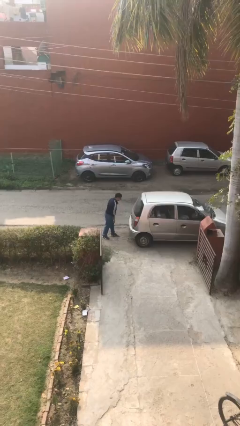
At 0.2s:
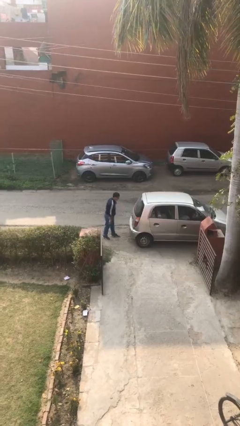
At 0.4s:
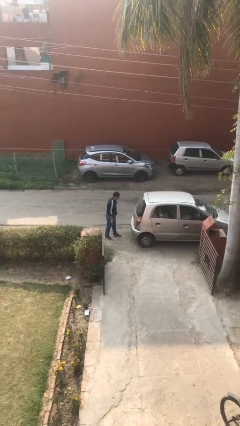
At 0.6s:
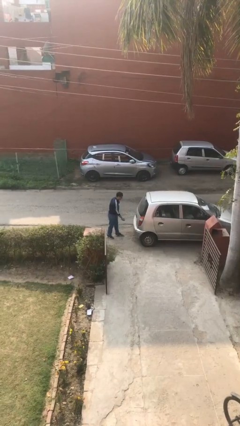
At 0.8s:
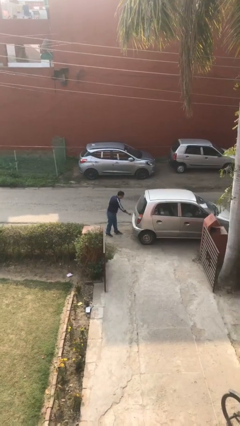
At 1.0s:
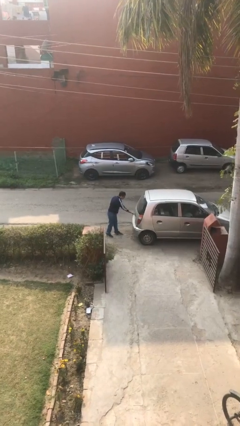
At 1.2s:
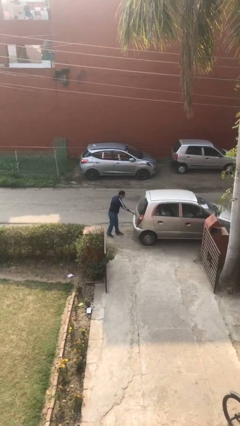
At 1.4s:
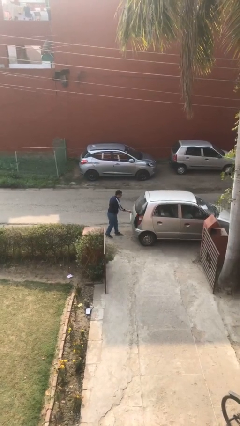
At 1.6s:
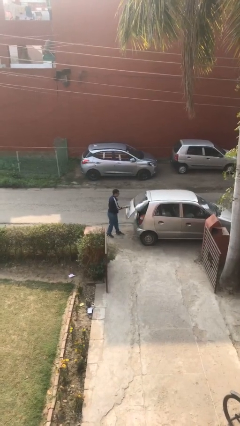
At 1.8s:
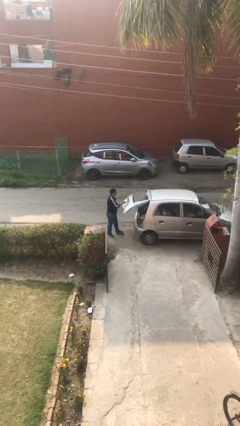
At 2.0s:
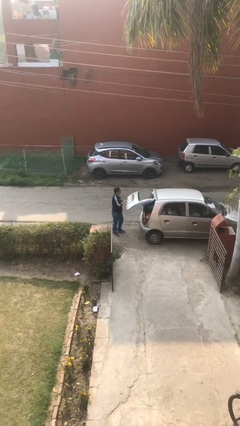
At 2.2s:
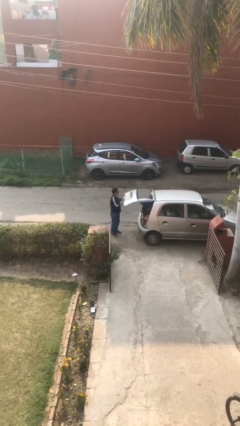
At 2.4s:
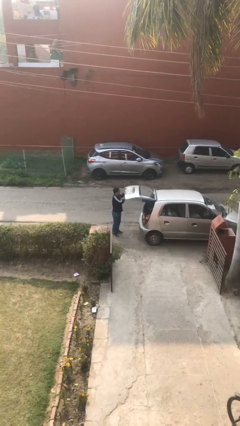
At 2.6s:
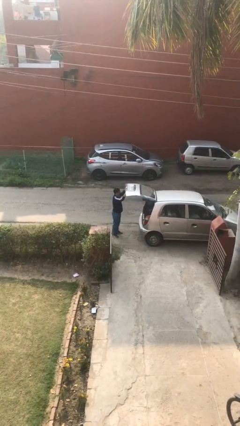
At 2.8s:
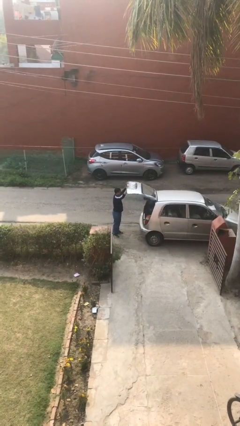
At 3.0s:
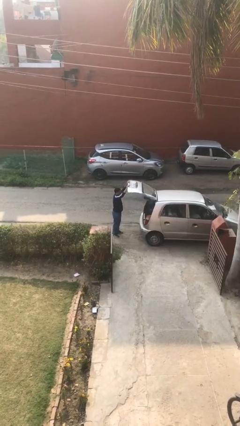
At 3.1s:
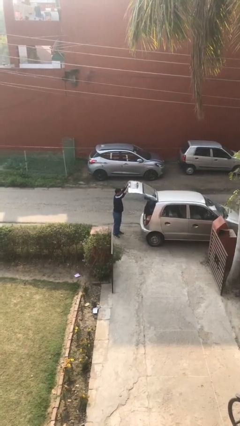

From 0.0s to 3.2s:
person opens car trunk

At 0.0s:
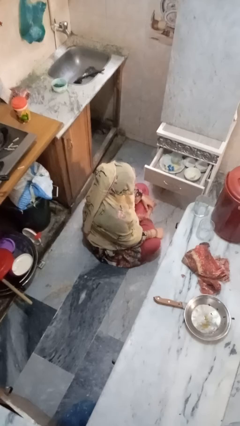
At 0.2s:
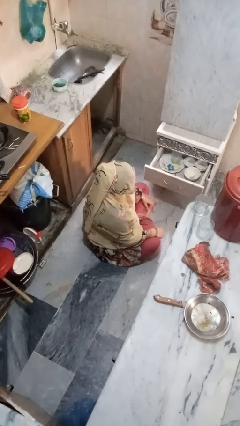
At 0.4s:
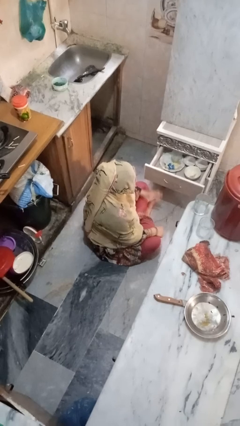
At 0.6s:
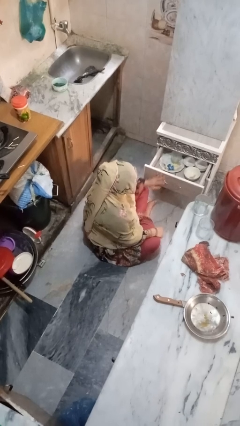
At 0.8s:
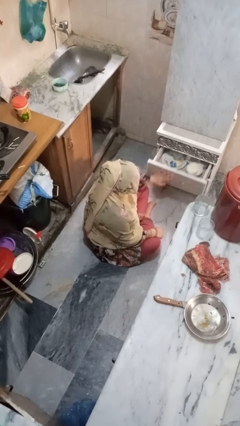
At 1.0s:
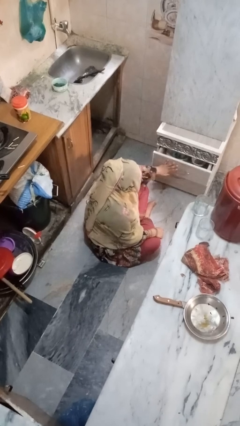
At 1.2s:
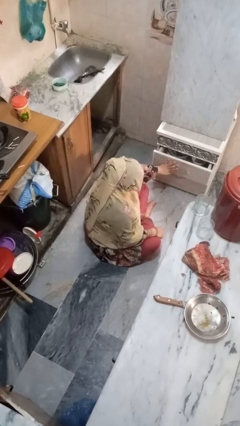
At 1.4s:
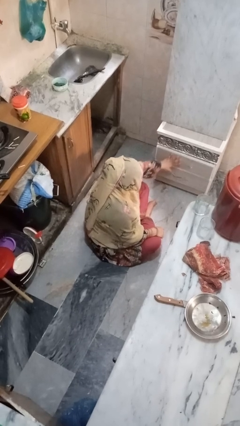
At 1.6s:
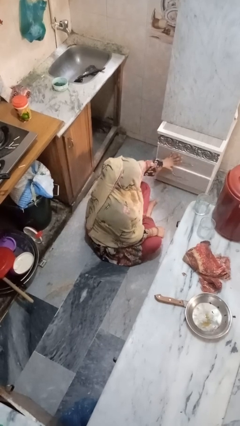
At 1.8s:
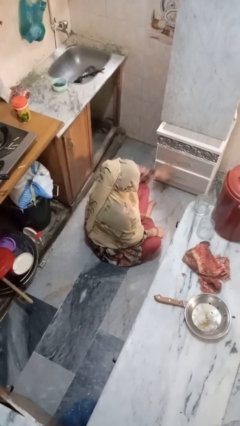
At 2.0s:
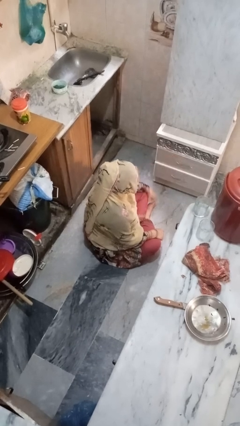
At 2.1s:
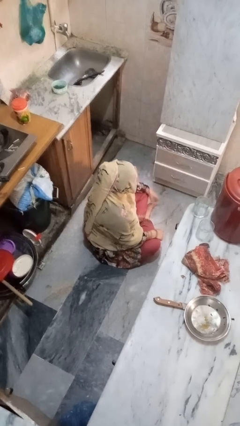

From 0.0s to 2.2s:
person closes kitchen drawer

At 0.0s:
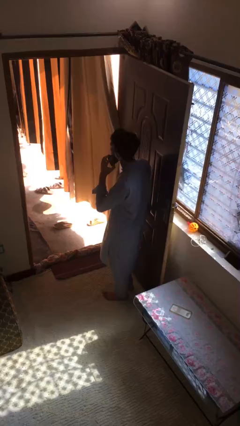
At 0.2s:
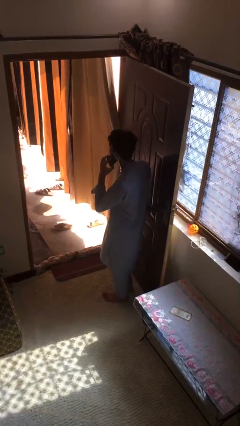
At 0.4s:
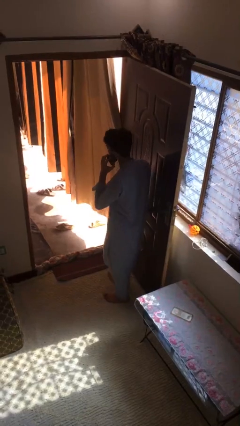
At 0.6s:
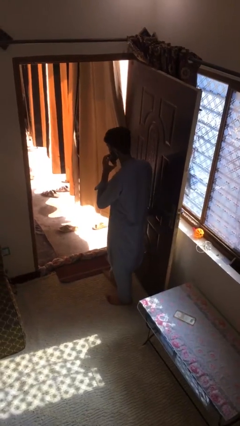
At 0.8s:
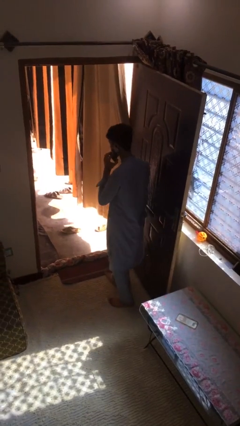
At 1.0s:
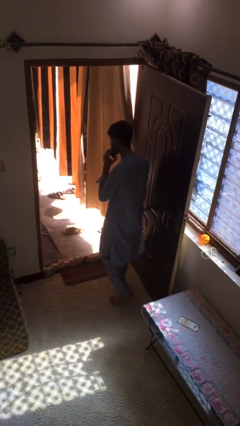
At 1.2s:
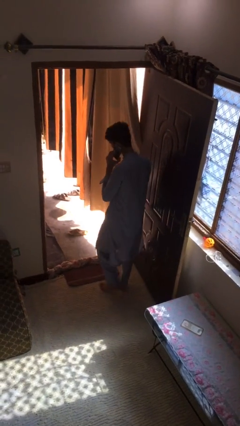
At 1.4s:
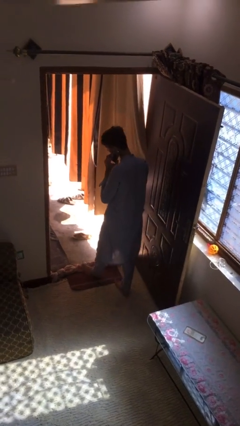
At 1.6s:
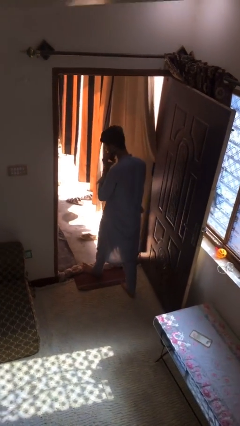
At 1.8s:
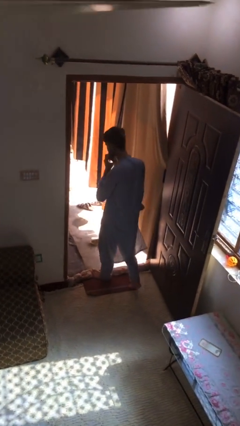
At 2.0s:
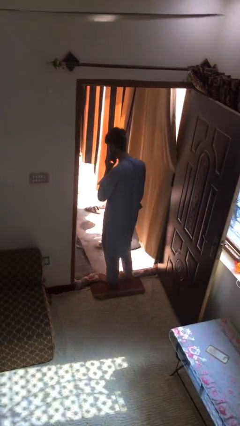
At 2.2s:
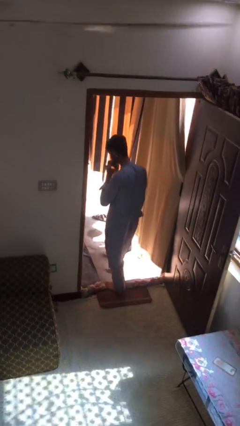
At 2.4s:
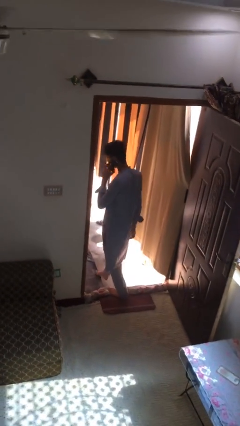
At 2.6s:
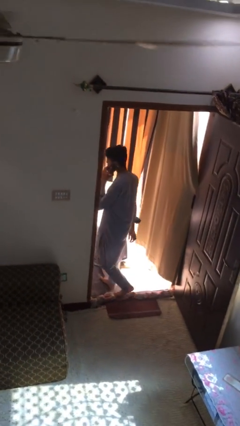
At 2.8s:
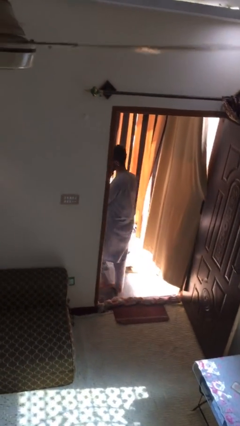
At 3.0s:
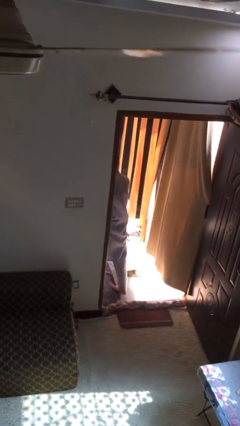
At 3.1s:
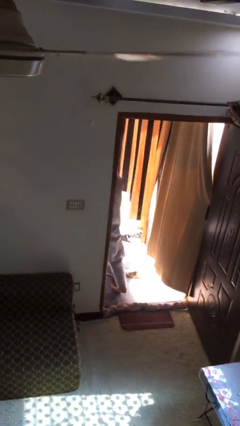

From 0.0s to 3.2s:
person exits scene through structure

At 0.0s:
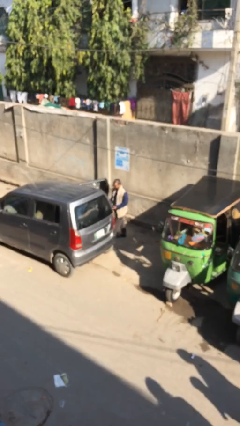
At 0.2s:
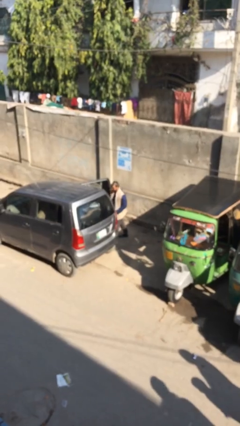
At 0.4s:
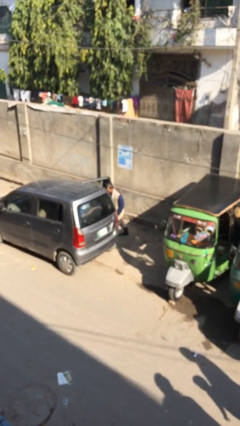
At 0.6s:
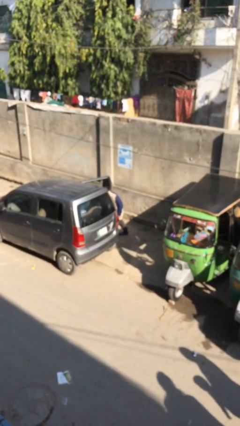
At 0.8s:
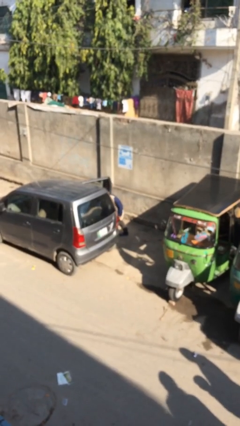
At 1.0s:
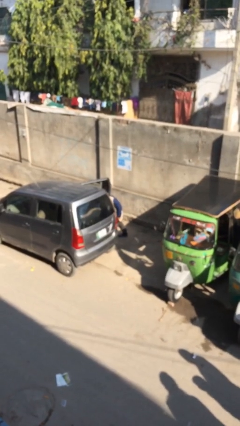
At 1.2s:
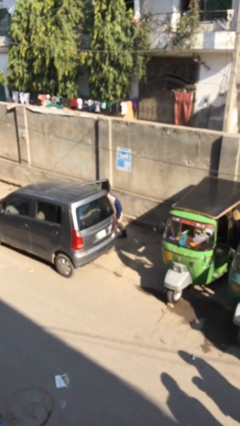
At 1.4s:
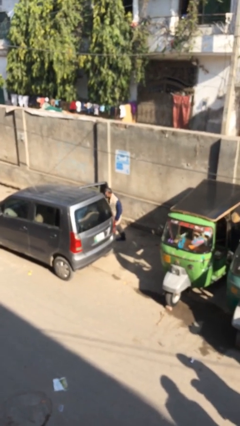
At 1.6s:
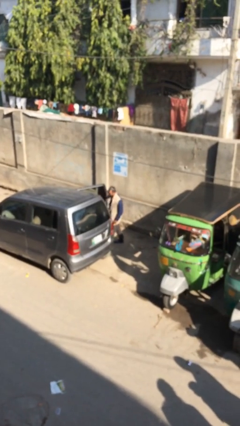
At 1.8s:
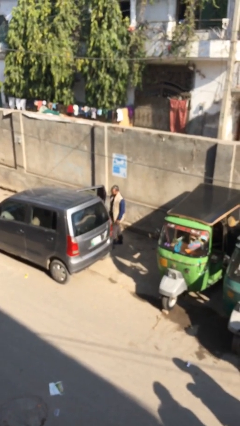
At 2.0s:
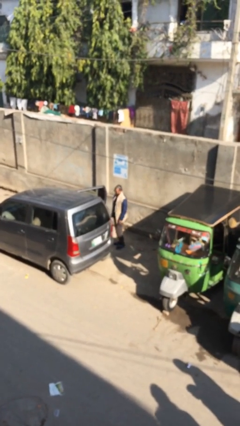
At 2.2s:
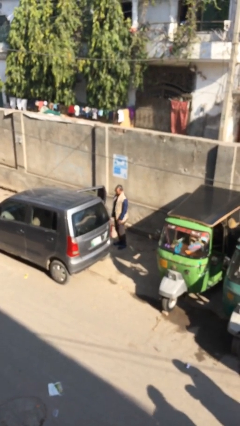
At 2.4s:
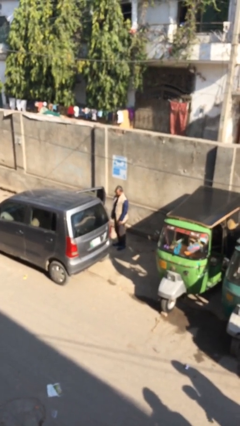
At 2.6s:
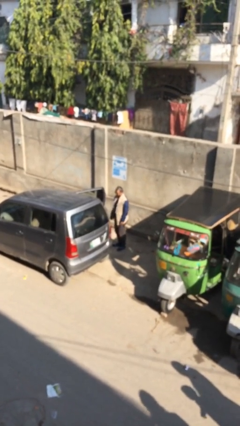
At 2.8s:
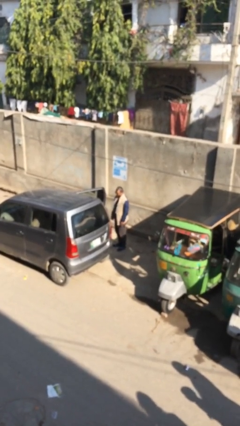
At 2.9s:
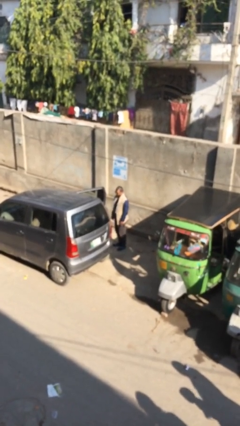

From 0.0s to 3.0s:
person loads car

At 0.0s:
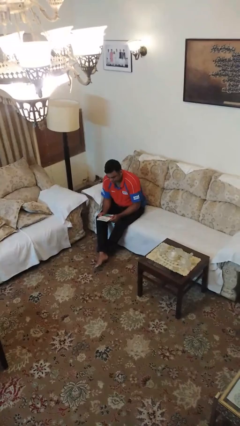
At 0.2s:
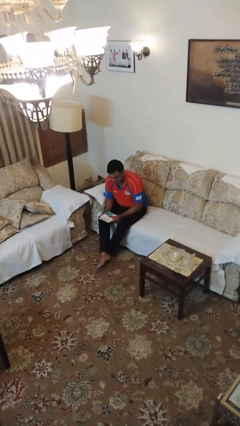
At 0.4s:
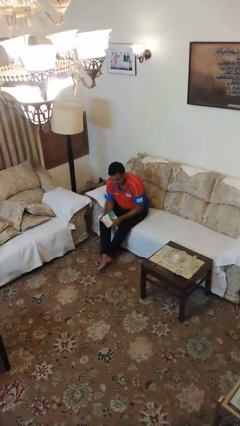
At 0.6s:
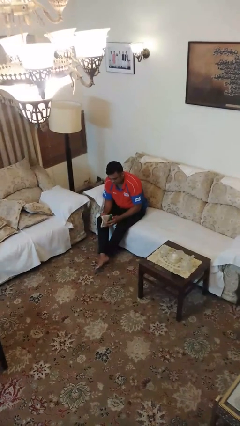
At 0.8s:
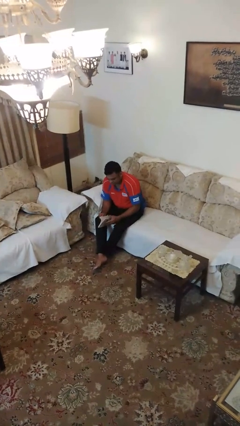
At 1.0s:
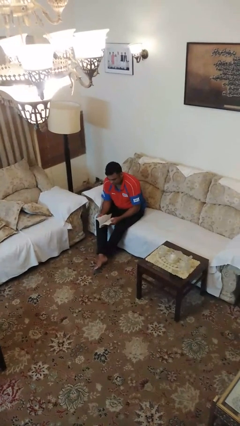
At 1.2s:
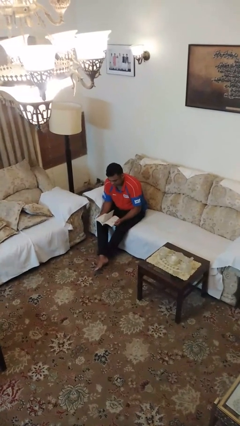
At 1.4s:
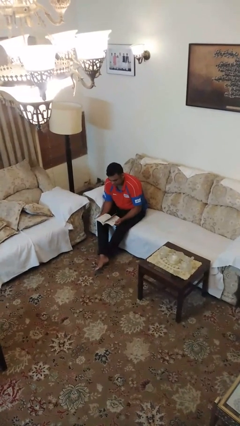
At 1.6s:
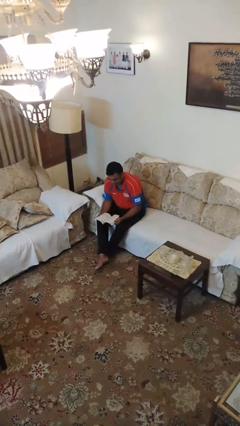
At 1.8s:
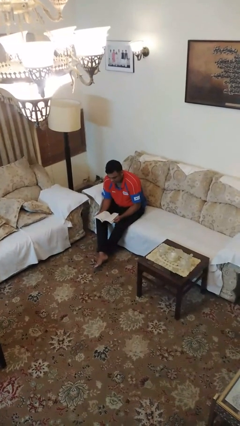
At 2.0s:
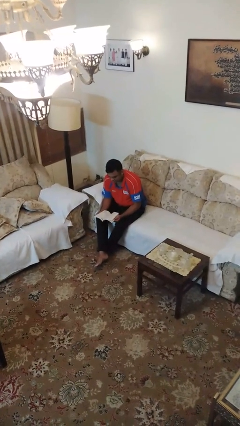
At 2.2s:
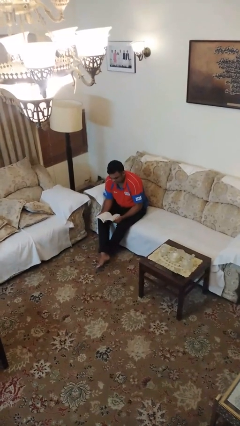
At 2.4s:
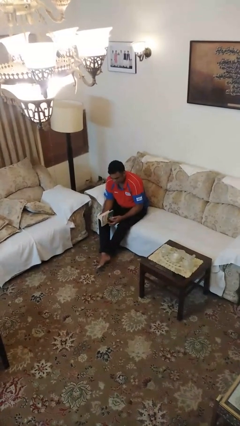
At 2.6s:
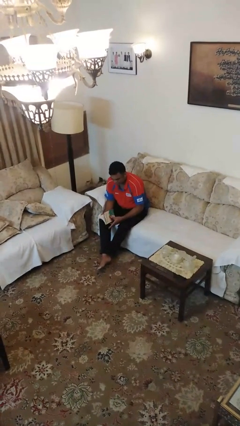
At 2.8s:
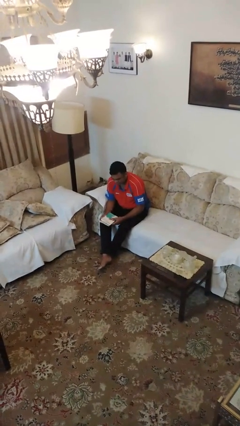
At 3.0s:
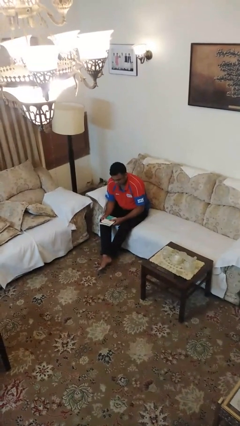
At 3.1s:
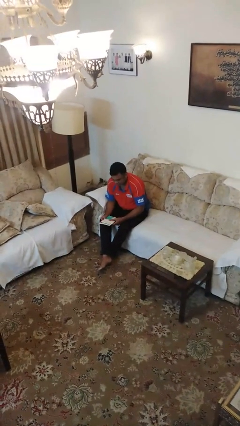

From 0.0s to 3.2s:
person reads magazine

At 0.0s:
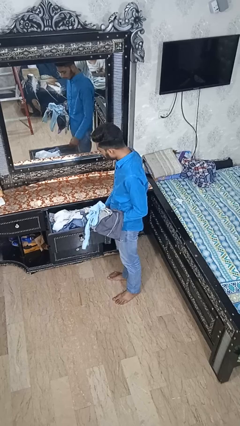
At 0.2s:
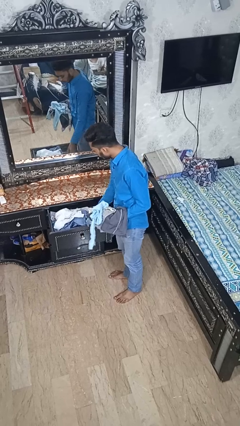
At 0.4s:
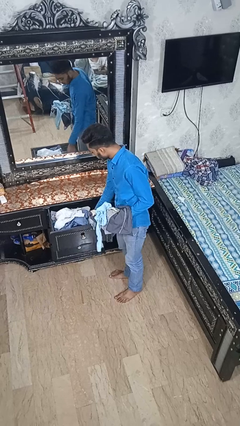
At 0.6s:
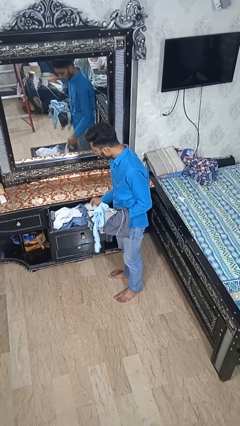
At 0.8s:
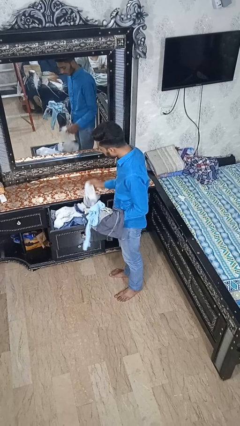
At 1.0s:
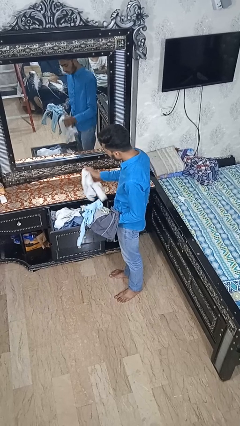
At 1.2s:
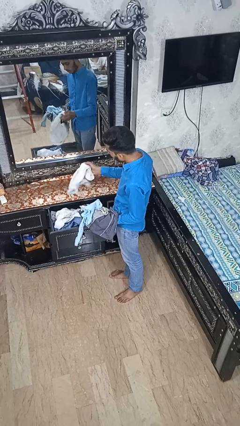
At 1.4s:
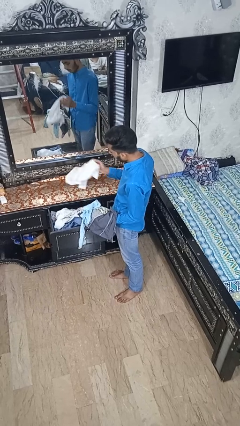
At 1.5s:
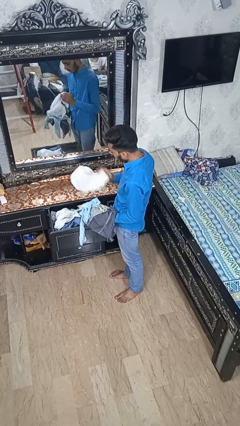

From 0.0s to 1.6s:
person takes clothes from dresser

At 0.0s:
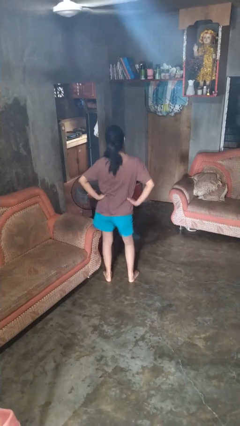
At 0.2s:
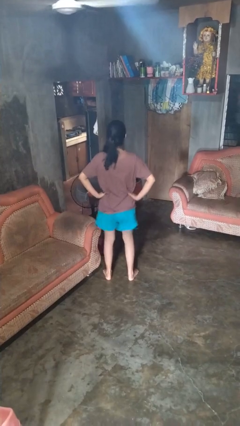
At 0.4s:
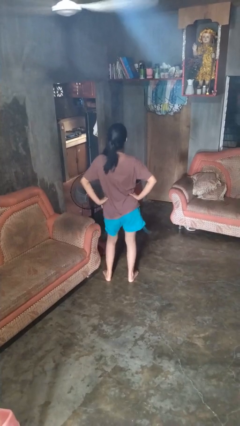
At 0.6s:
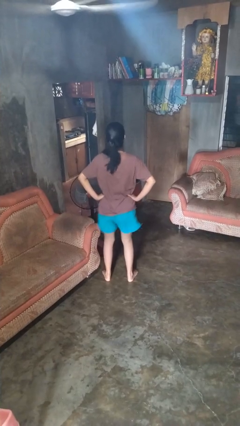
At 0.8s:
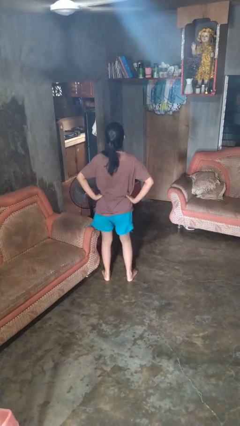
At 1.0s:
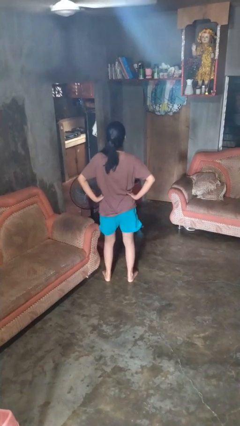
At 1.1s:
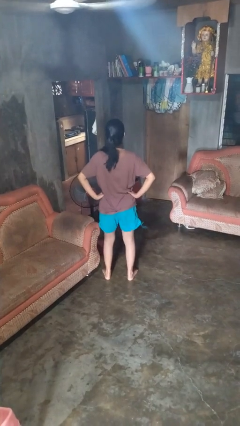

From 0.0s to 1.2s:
person wiggles hips
